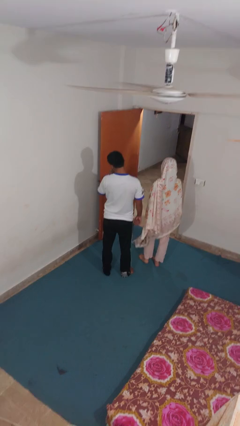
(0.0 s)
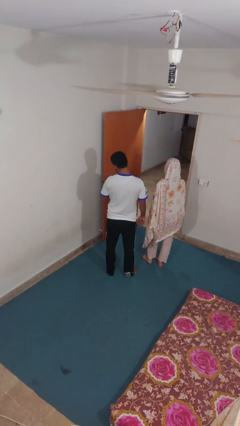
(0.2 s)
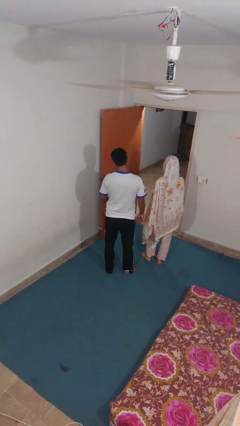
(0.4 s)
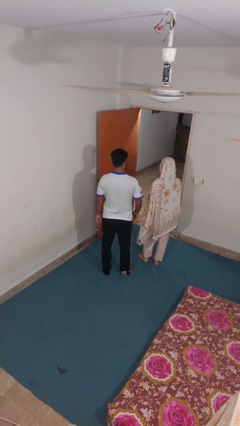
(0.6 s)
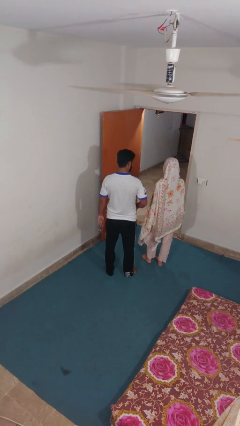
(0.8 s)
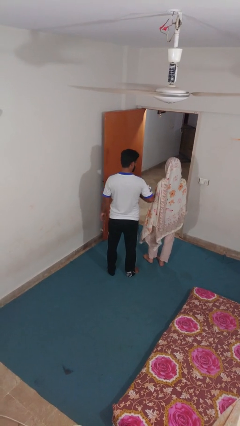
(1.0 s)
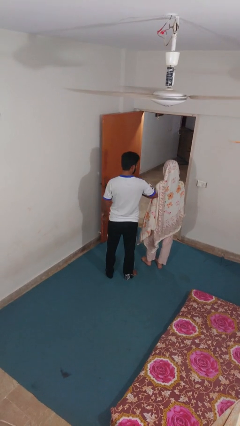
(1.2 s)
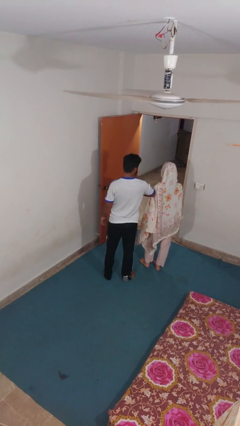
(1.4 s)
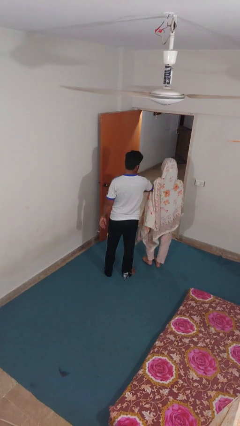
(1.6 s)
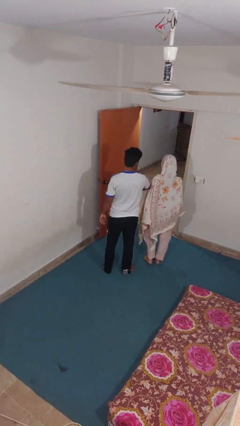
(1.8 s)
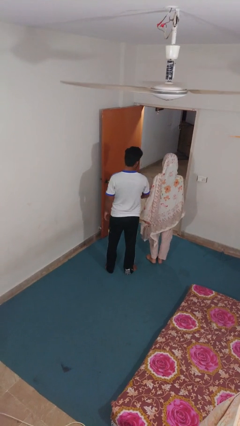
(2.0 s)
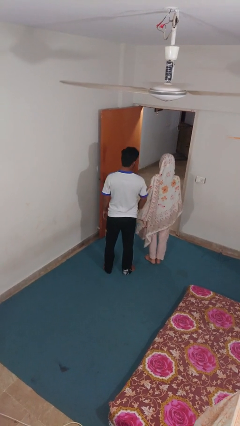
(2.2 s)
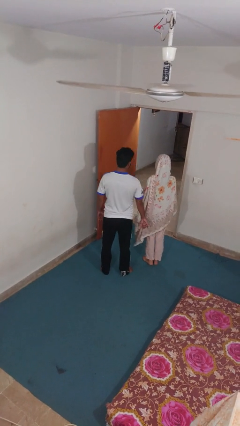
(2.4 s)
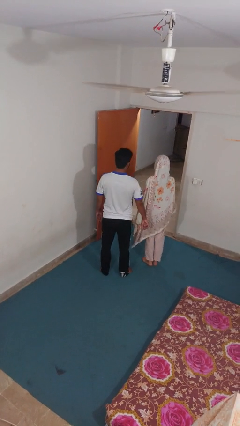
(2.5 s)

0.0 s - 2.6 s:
person nudges person with elbow

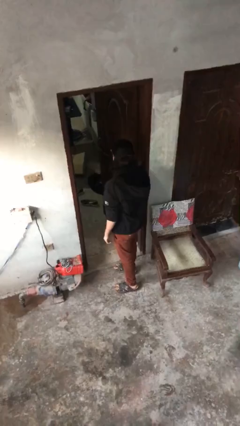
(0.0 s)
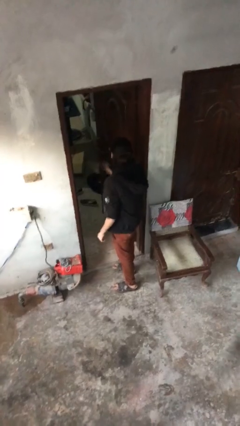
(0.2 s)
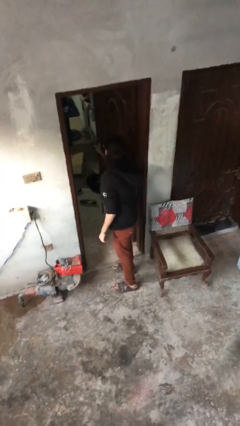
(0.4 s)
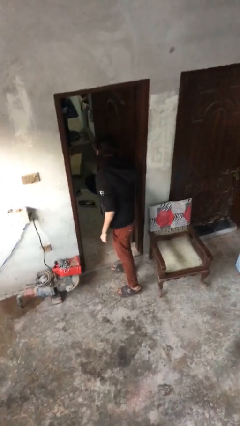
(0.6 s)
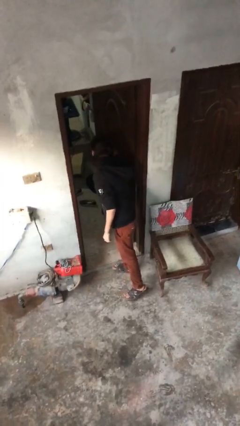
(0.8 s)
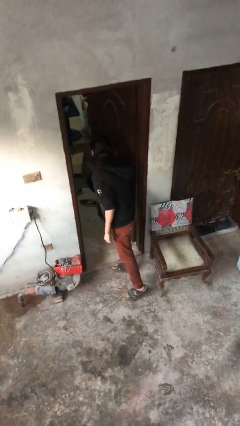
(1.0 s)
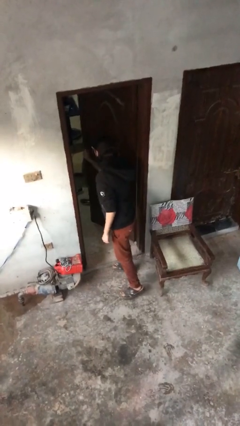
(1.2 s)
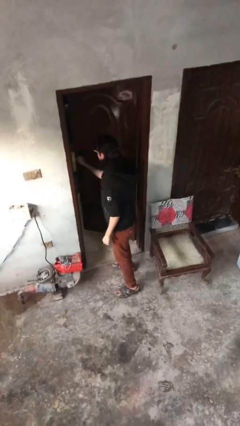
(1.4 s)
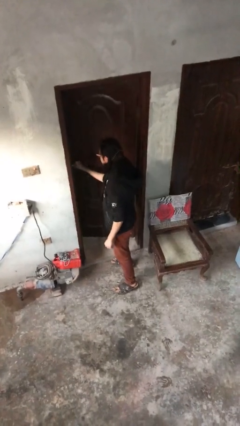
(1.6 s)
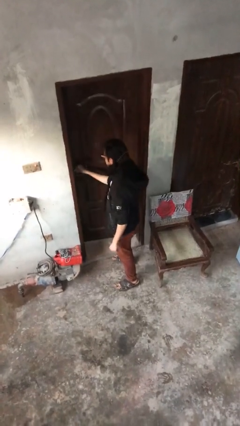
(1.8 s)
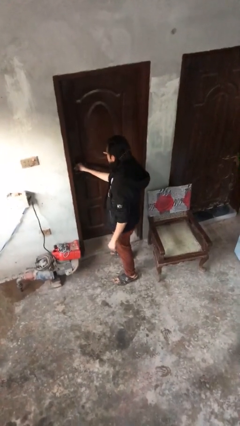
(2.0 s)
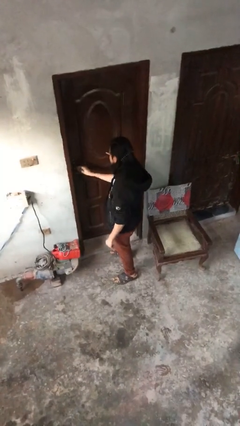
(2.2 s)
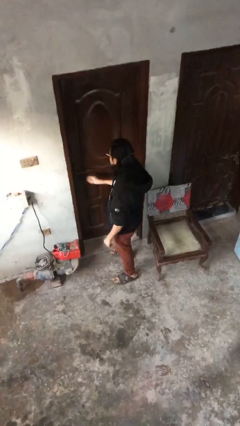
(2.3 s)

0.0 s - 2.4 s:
person closes facility door

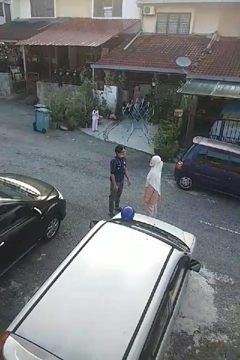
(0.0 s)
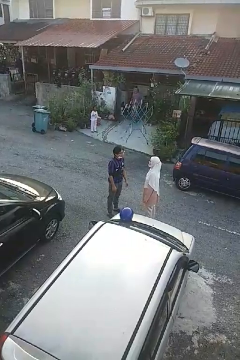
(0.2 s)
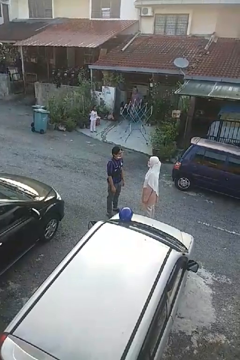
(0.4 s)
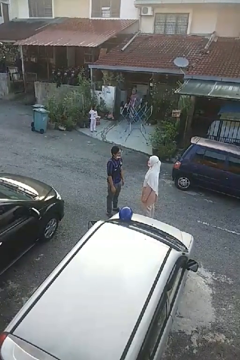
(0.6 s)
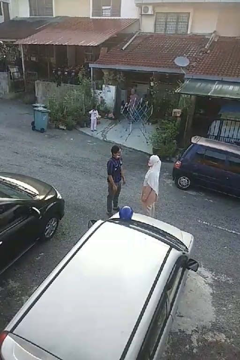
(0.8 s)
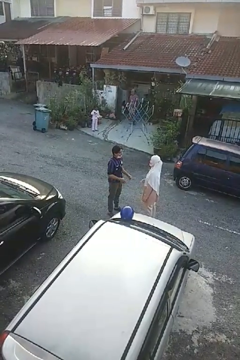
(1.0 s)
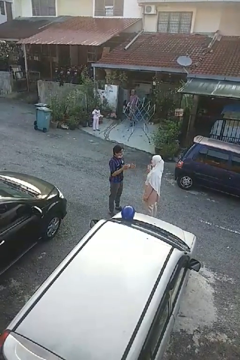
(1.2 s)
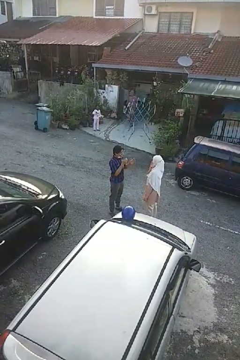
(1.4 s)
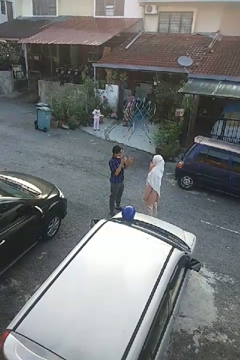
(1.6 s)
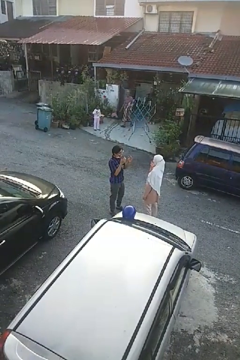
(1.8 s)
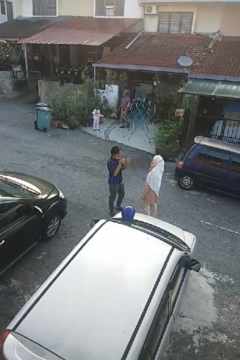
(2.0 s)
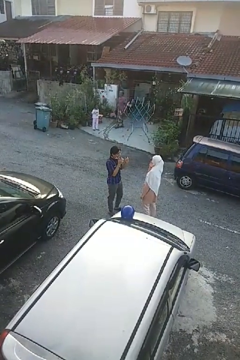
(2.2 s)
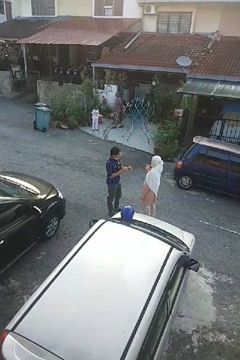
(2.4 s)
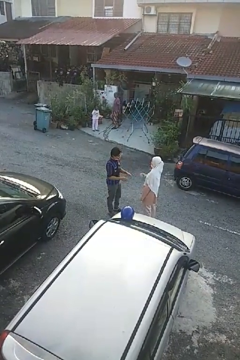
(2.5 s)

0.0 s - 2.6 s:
person laughs with person

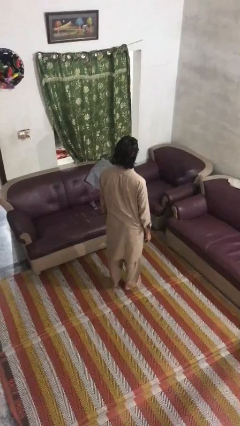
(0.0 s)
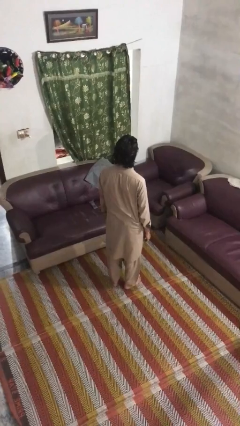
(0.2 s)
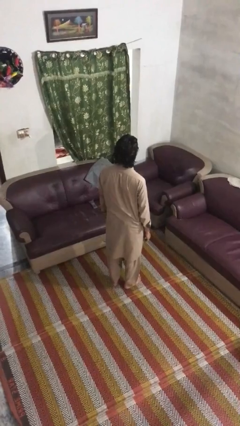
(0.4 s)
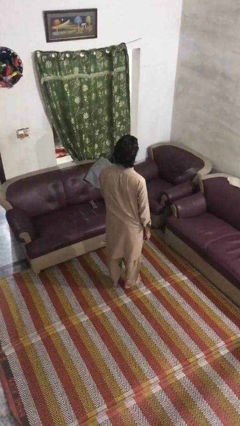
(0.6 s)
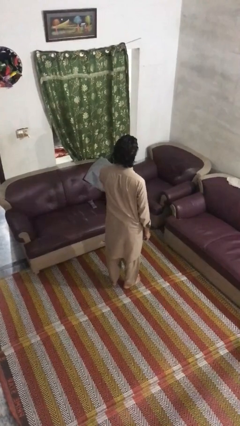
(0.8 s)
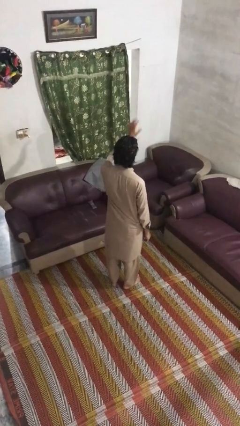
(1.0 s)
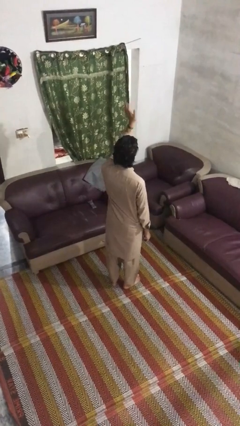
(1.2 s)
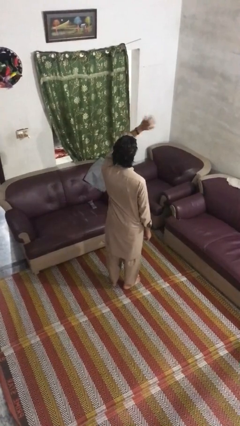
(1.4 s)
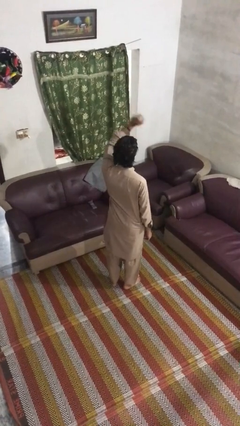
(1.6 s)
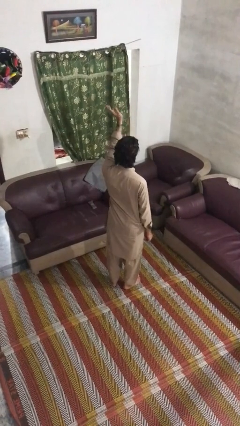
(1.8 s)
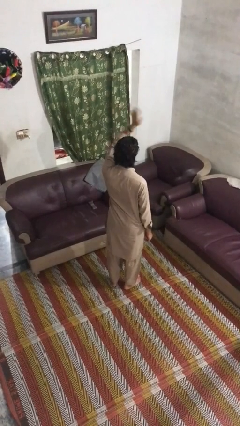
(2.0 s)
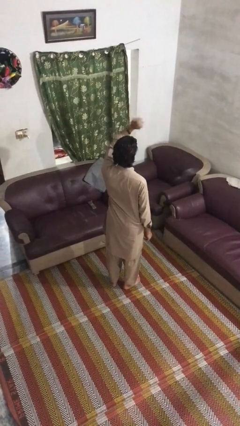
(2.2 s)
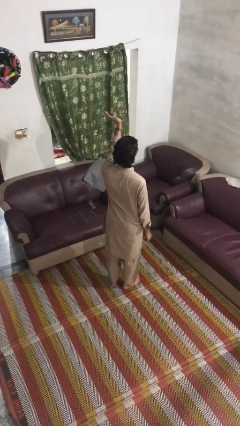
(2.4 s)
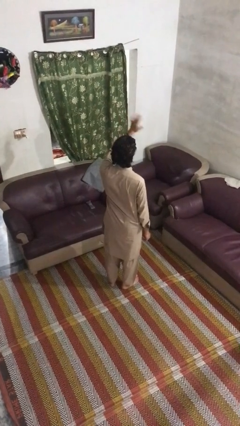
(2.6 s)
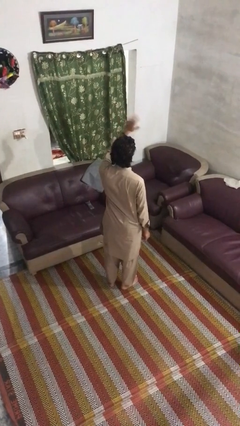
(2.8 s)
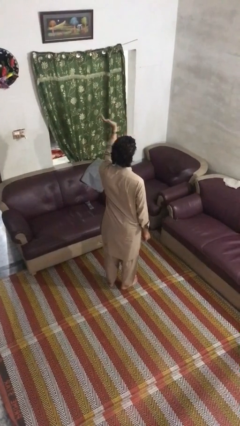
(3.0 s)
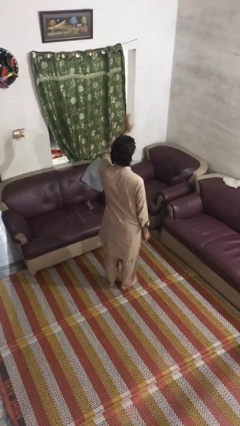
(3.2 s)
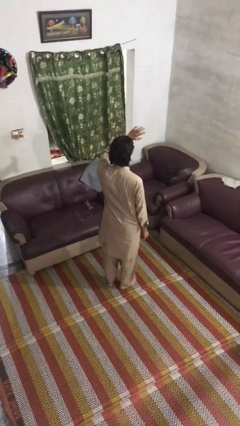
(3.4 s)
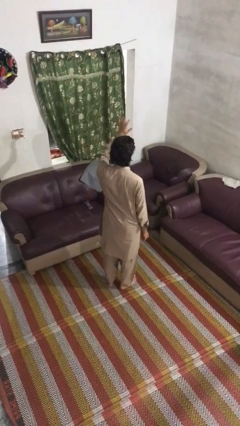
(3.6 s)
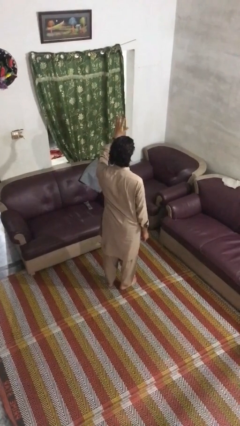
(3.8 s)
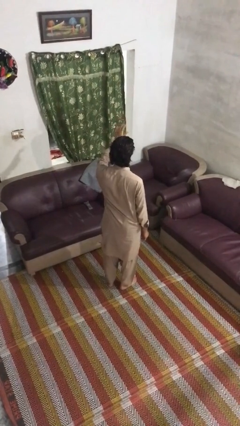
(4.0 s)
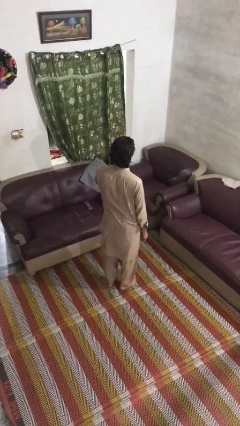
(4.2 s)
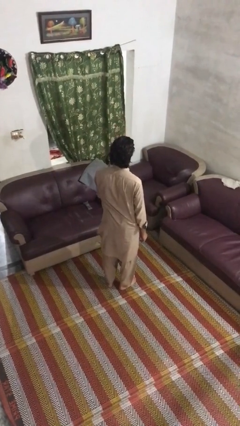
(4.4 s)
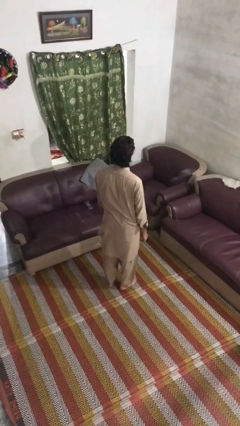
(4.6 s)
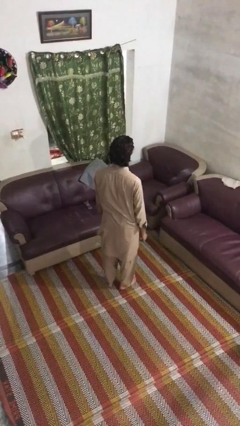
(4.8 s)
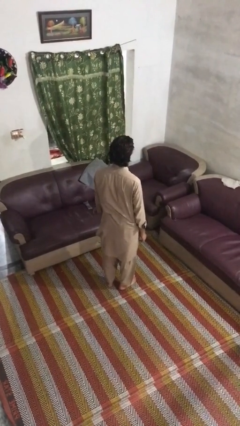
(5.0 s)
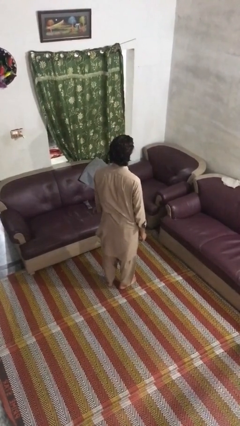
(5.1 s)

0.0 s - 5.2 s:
person waves at person

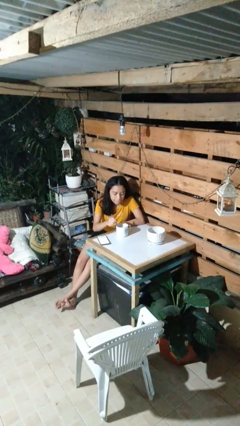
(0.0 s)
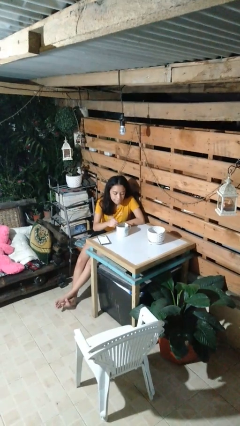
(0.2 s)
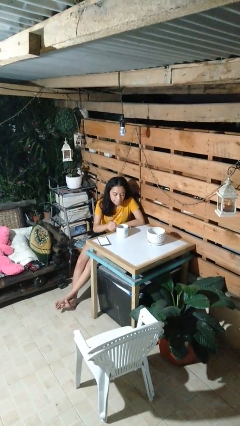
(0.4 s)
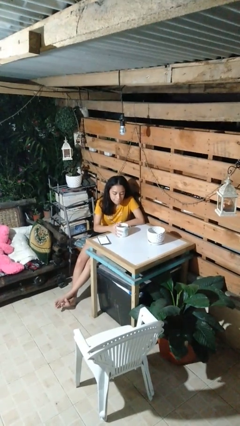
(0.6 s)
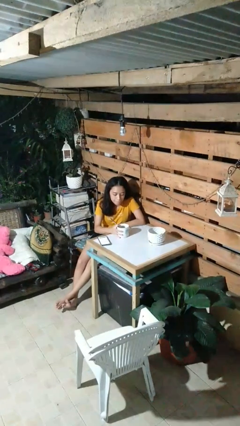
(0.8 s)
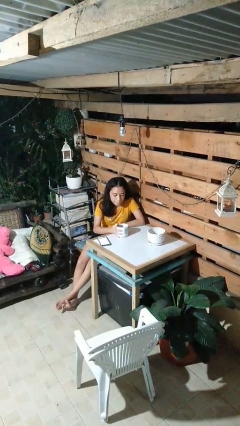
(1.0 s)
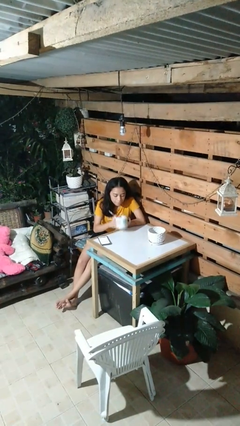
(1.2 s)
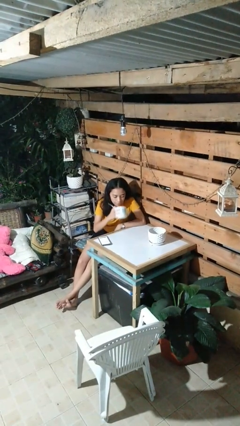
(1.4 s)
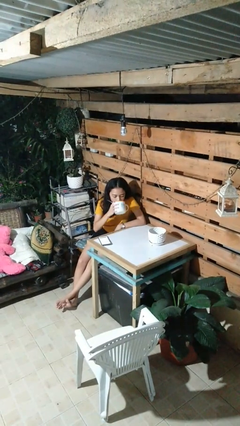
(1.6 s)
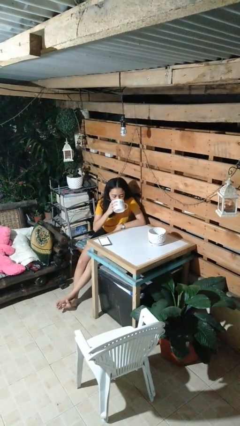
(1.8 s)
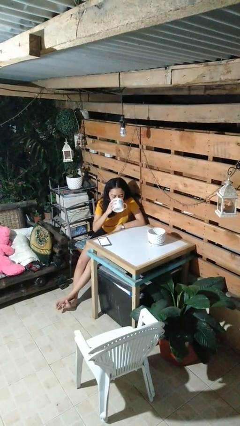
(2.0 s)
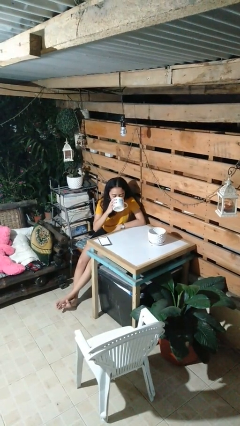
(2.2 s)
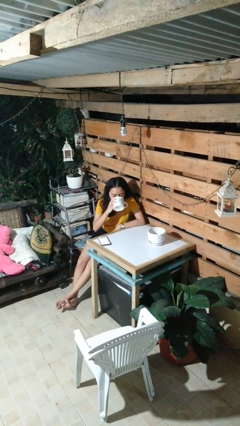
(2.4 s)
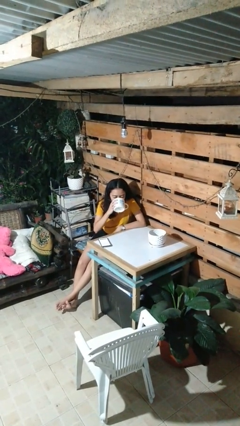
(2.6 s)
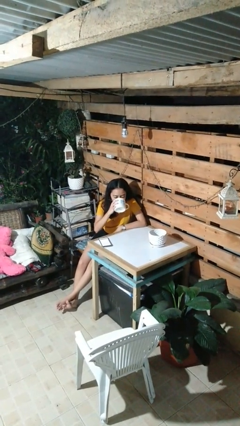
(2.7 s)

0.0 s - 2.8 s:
person drinks from mug

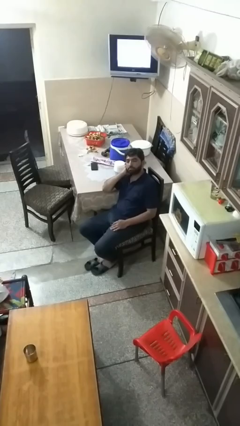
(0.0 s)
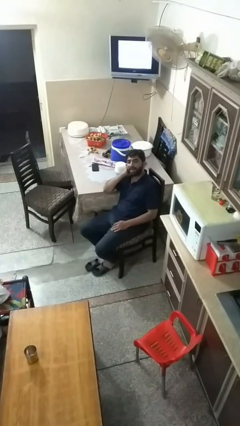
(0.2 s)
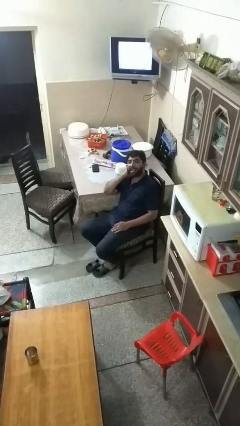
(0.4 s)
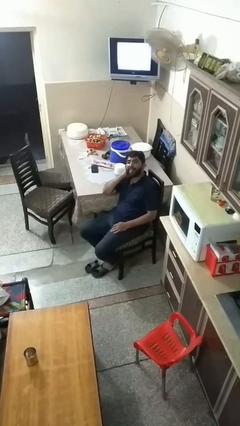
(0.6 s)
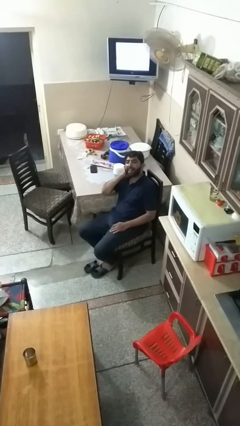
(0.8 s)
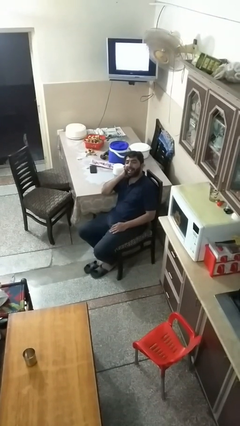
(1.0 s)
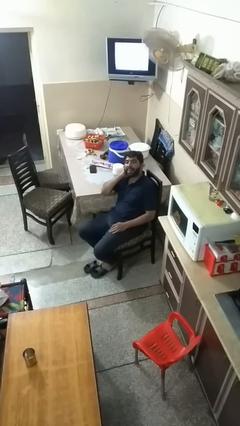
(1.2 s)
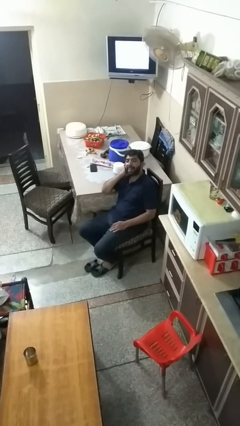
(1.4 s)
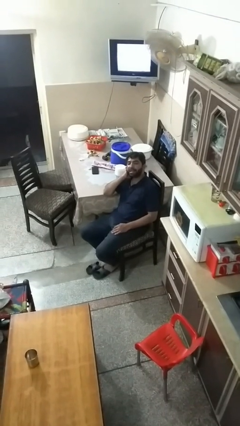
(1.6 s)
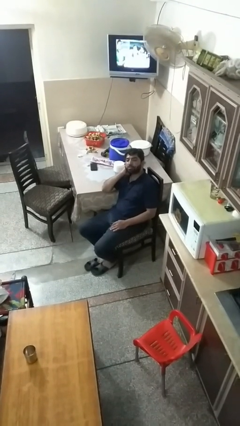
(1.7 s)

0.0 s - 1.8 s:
person sticks out tongue

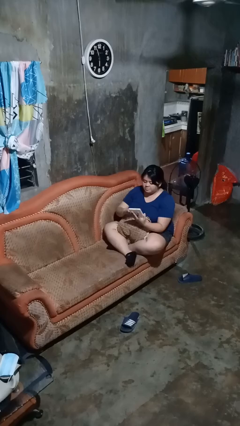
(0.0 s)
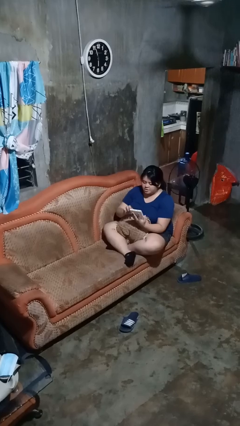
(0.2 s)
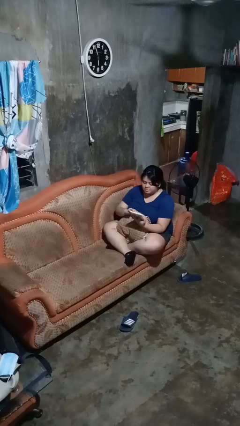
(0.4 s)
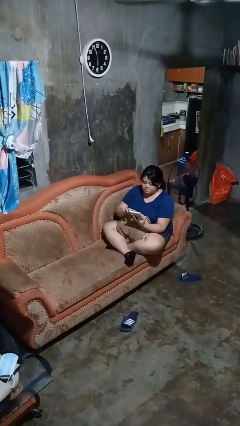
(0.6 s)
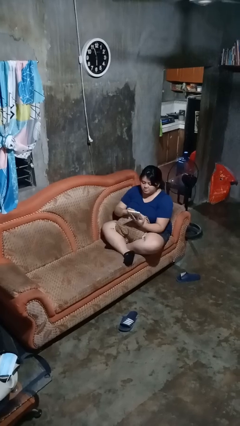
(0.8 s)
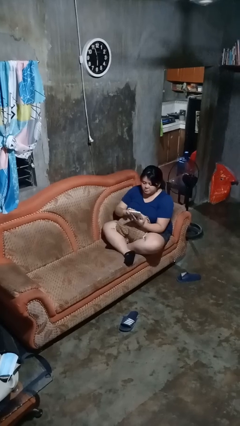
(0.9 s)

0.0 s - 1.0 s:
person interacts with tablet
